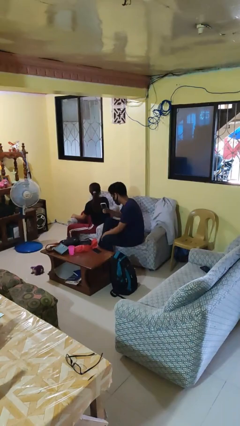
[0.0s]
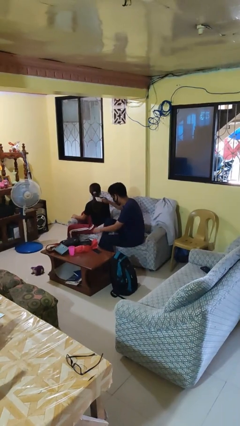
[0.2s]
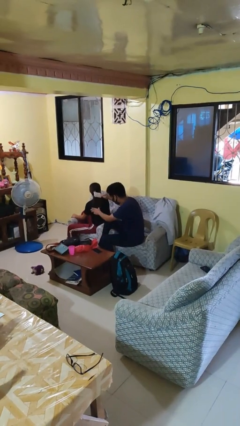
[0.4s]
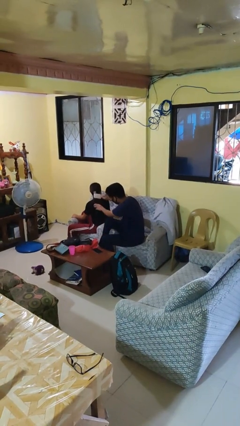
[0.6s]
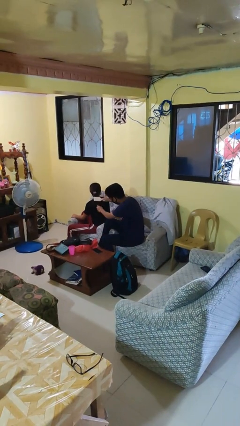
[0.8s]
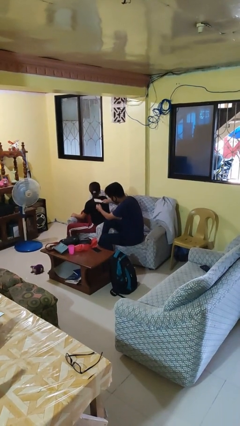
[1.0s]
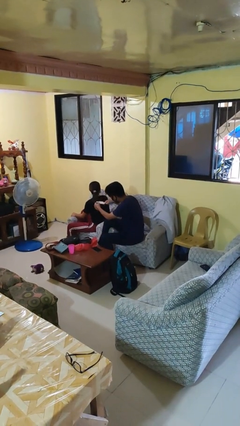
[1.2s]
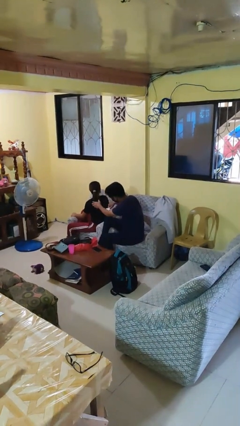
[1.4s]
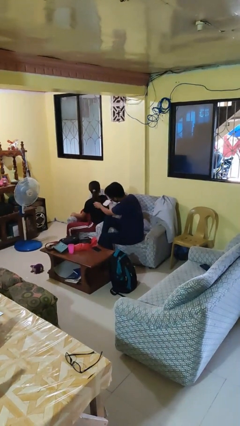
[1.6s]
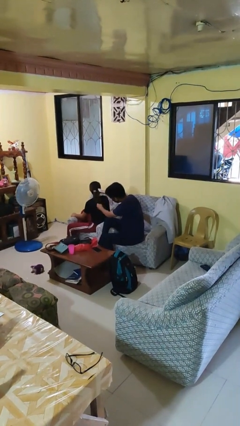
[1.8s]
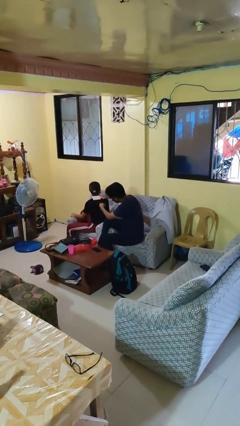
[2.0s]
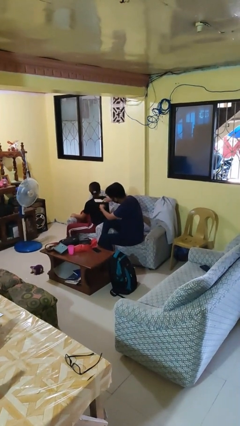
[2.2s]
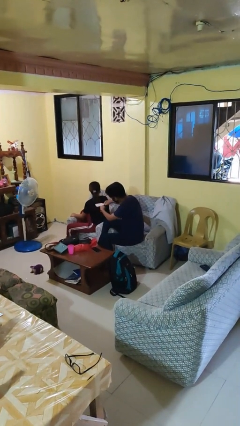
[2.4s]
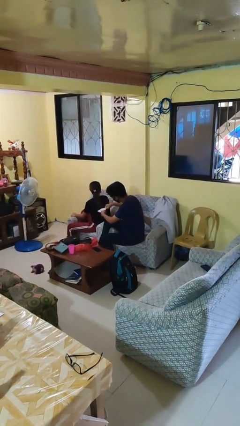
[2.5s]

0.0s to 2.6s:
person brushes hair of person

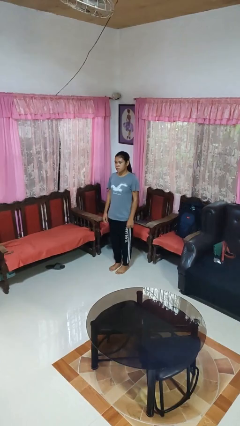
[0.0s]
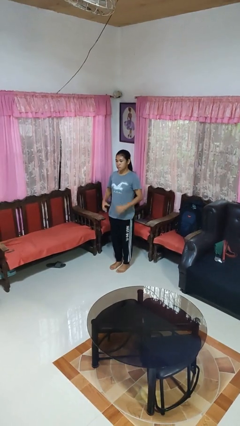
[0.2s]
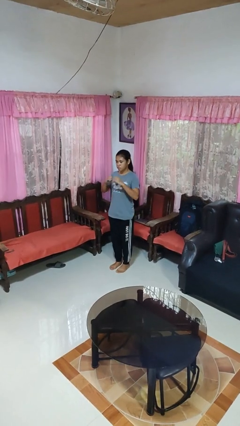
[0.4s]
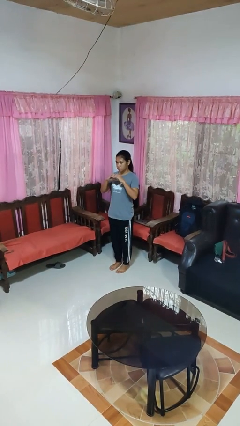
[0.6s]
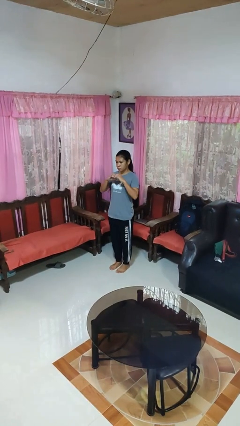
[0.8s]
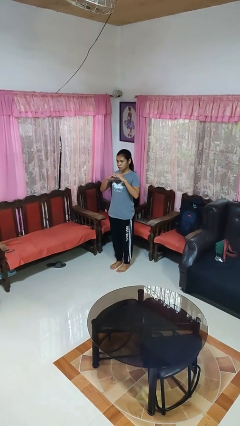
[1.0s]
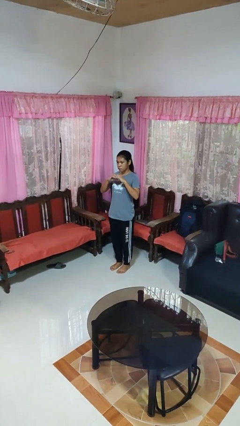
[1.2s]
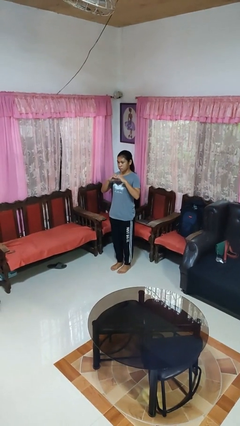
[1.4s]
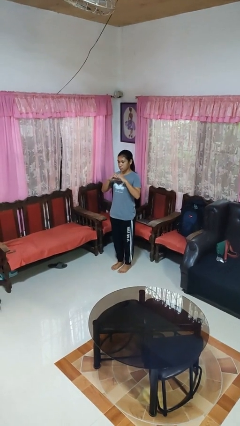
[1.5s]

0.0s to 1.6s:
person gestures heart

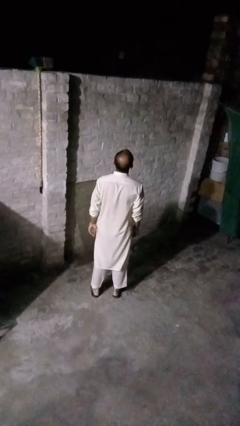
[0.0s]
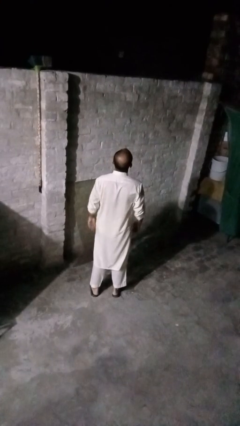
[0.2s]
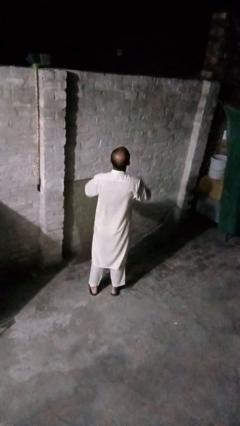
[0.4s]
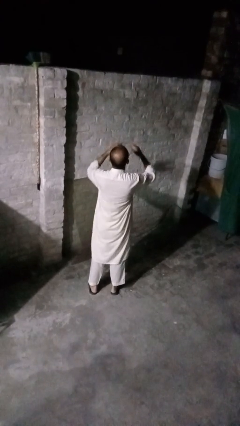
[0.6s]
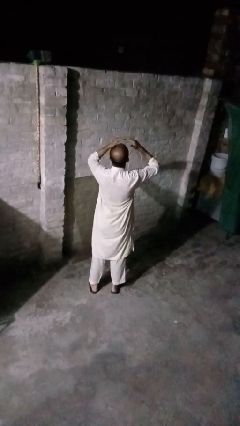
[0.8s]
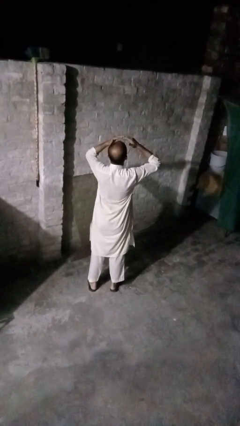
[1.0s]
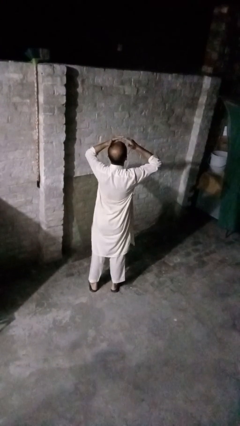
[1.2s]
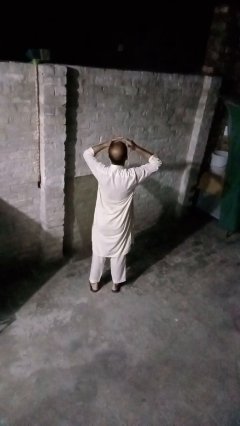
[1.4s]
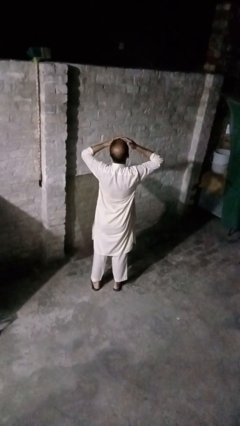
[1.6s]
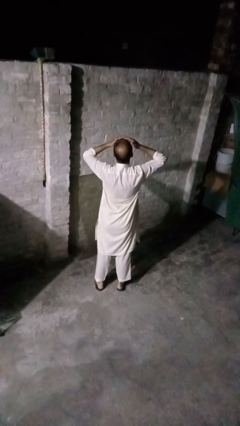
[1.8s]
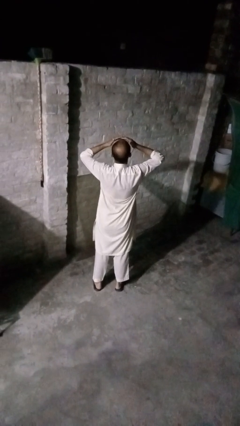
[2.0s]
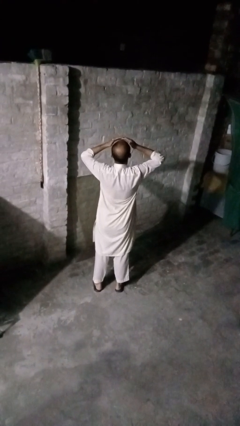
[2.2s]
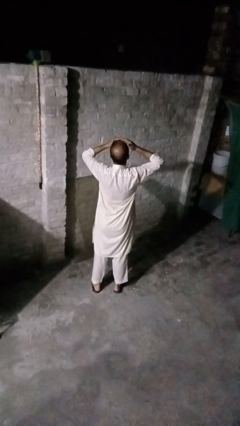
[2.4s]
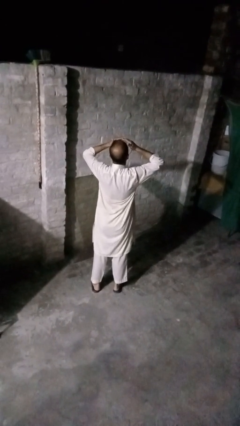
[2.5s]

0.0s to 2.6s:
person shades eyes

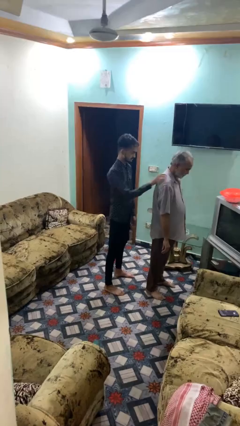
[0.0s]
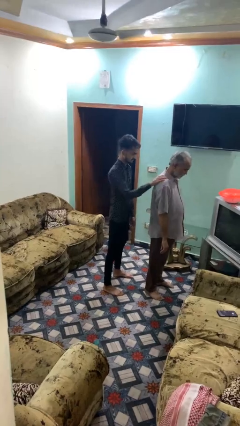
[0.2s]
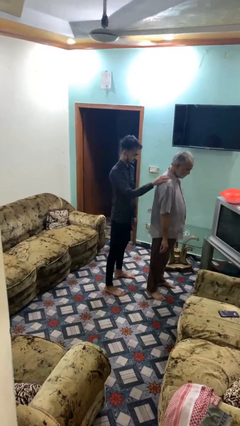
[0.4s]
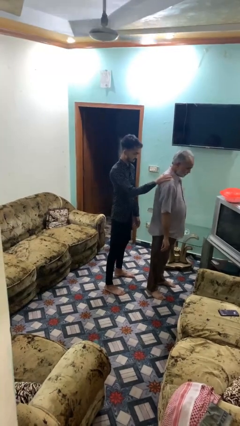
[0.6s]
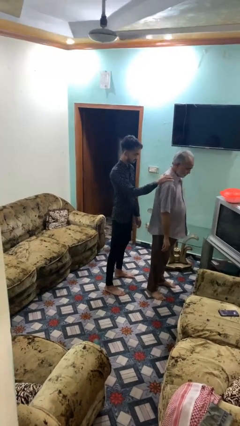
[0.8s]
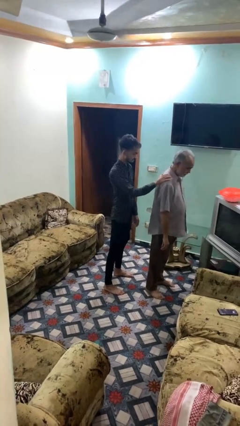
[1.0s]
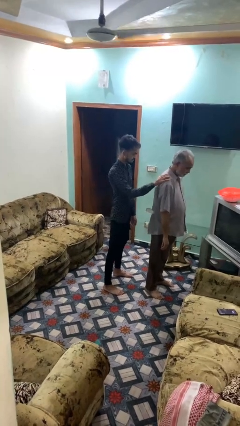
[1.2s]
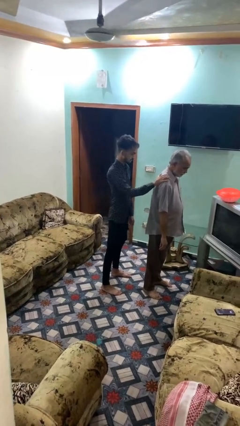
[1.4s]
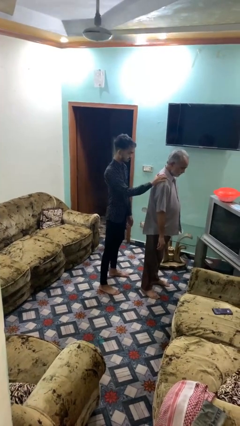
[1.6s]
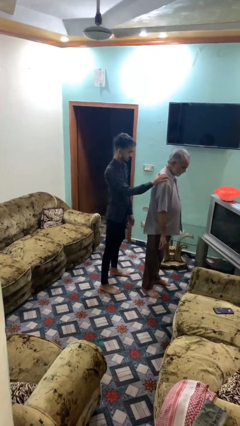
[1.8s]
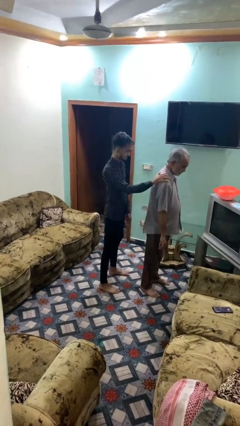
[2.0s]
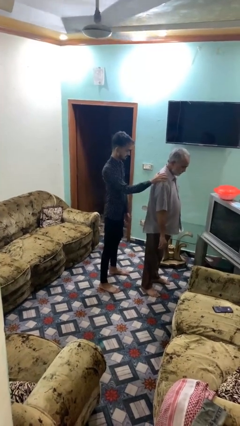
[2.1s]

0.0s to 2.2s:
person grabs person by shoulder

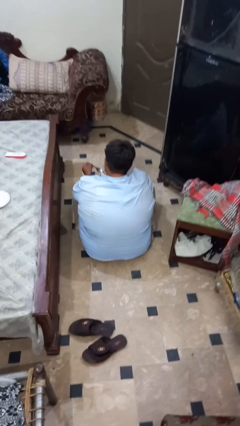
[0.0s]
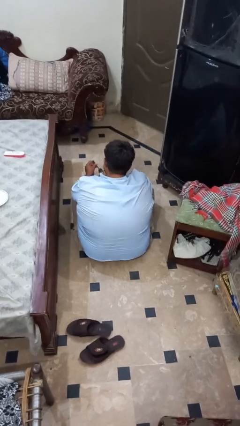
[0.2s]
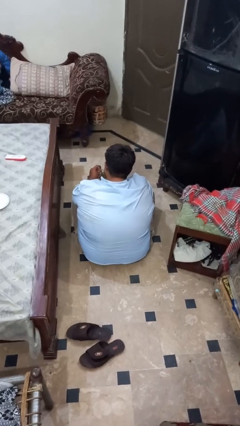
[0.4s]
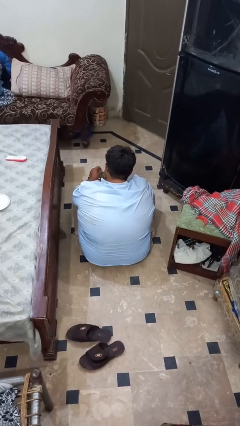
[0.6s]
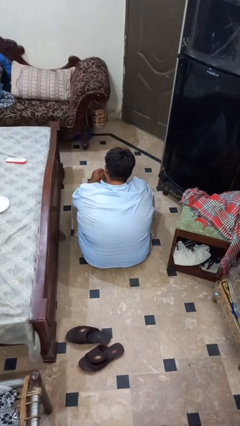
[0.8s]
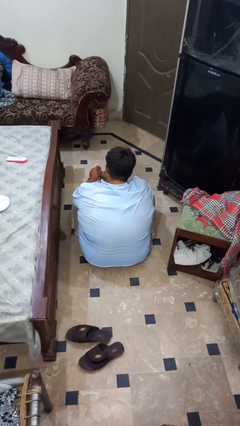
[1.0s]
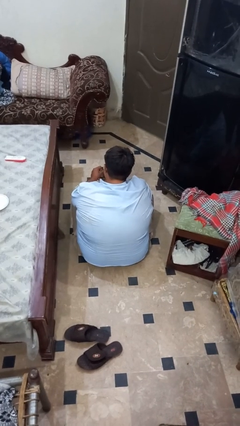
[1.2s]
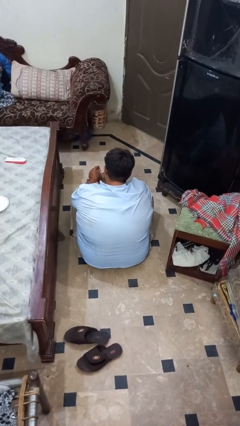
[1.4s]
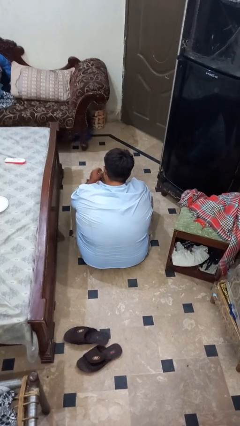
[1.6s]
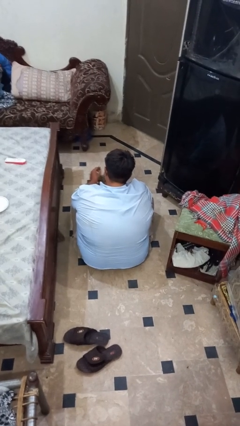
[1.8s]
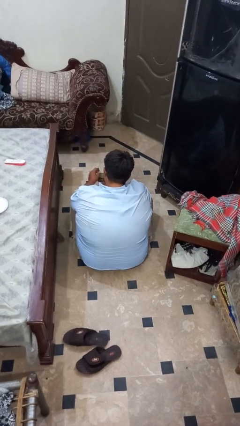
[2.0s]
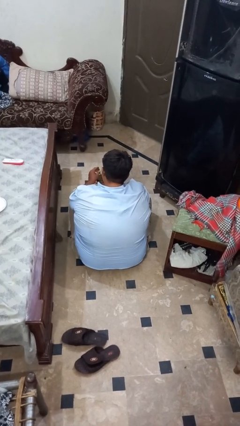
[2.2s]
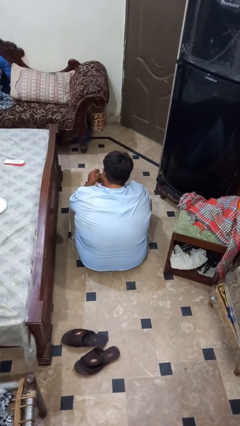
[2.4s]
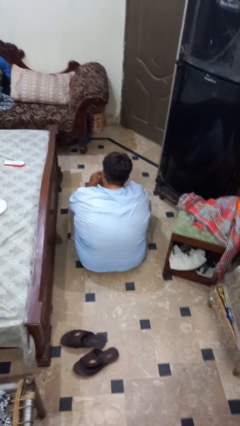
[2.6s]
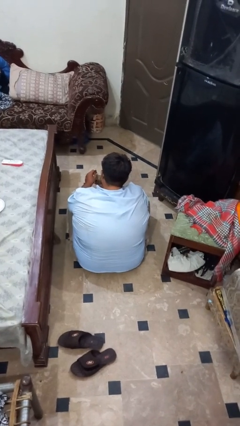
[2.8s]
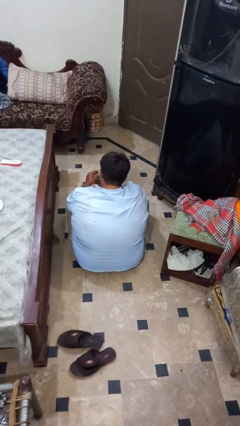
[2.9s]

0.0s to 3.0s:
person stirs mug

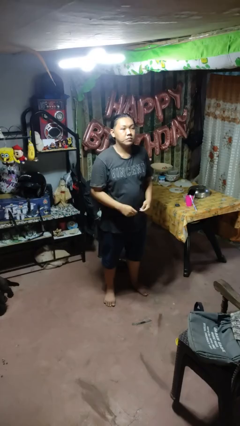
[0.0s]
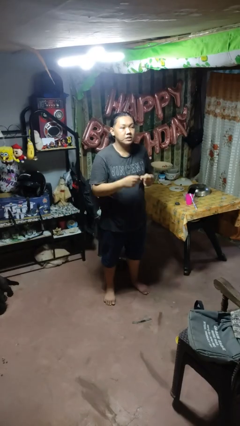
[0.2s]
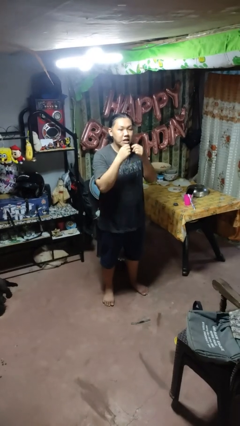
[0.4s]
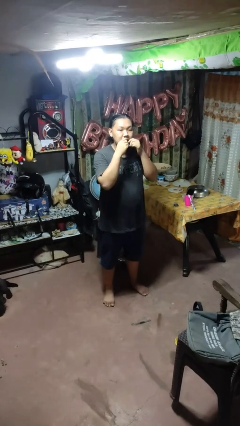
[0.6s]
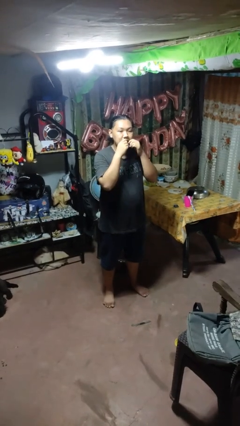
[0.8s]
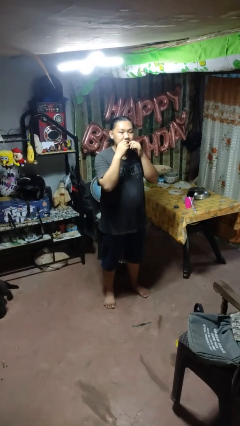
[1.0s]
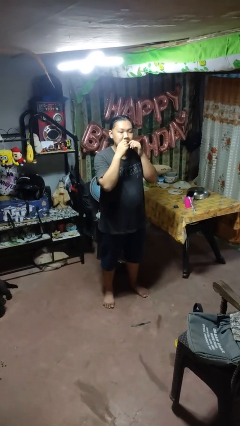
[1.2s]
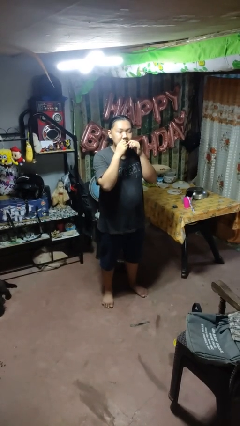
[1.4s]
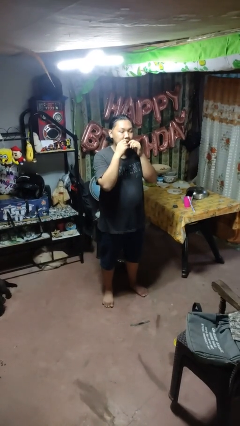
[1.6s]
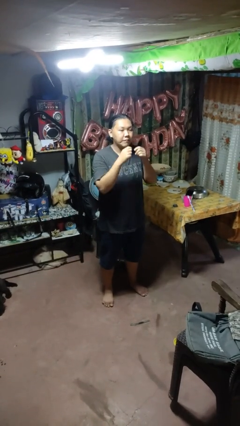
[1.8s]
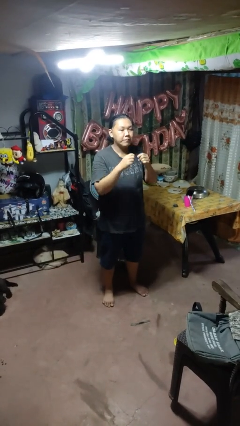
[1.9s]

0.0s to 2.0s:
person flosses

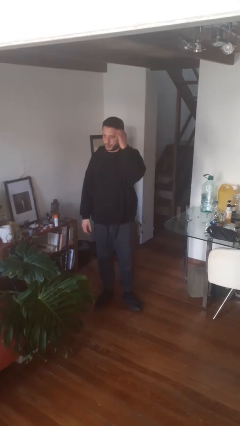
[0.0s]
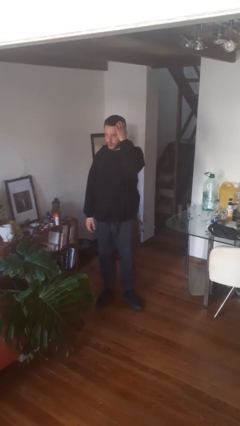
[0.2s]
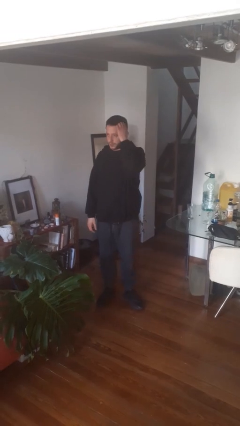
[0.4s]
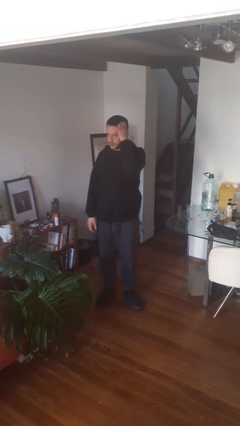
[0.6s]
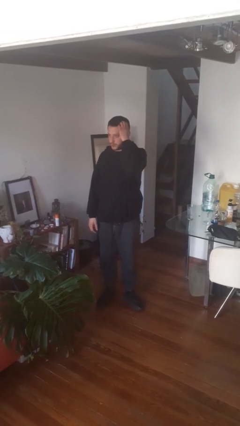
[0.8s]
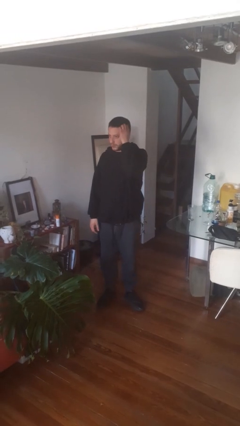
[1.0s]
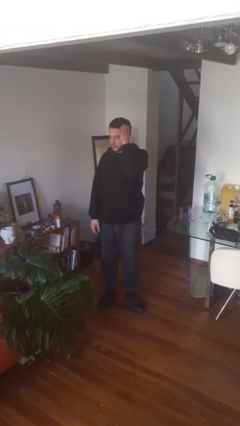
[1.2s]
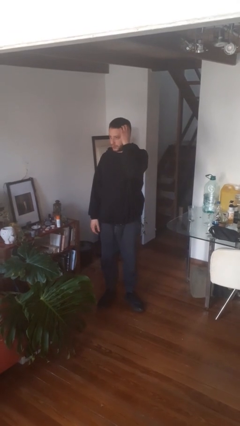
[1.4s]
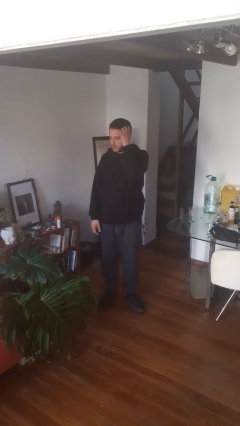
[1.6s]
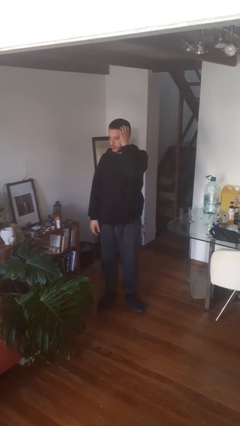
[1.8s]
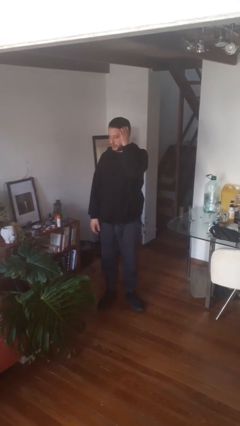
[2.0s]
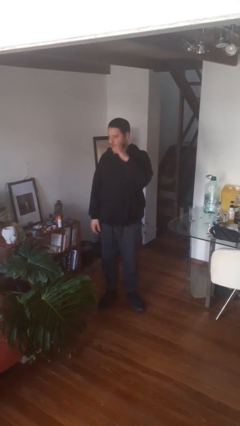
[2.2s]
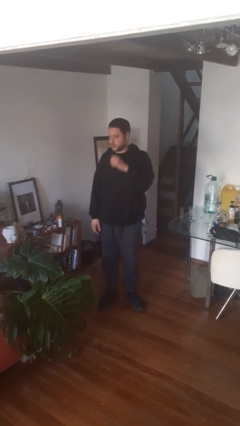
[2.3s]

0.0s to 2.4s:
person scratches face

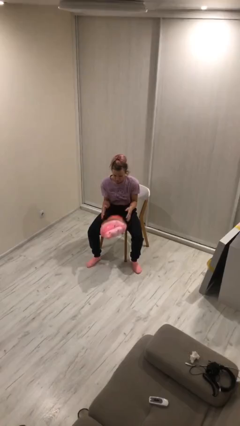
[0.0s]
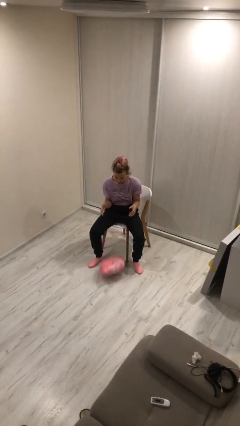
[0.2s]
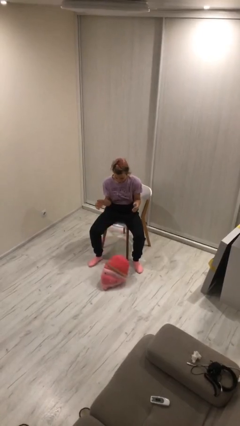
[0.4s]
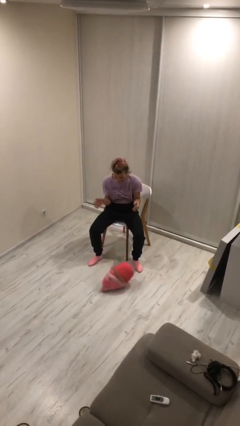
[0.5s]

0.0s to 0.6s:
person drops object
